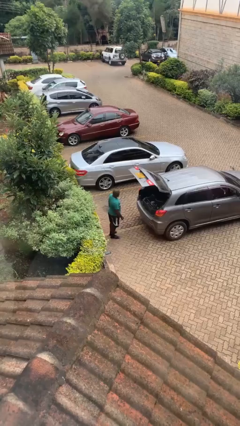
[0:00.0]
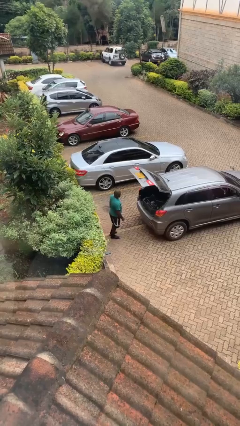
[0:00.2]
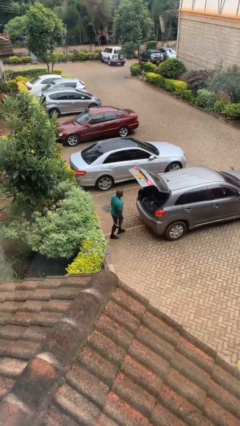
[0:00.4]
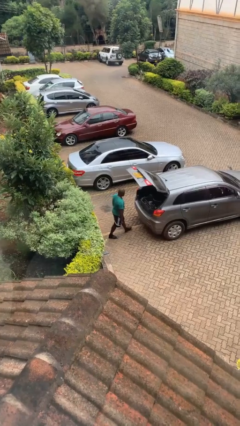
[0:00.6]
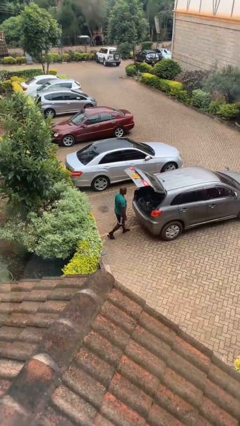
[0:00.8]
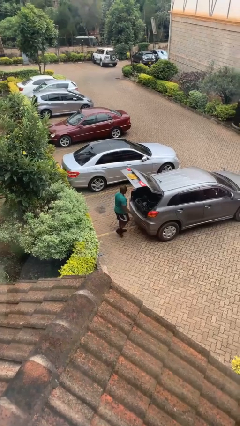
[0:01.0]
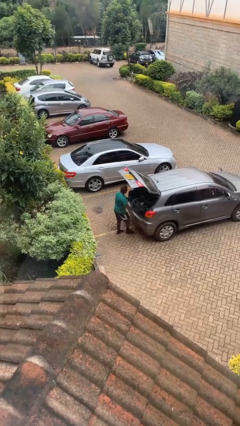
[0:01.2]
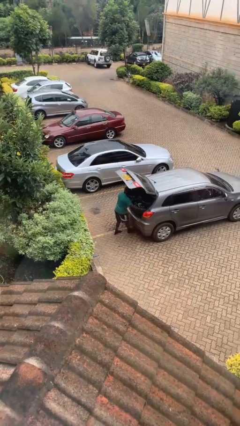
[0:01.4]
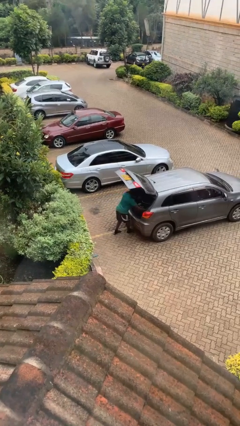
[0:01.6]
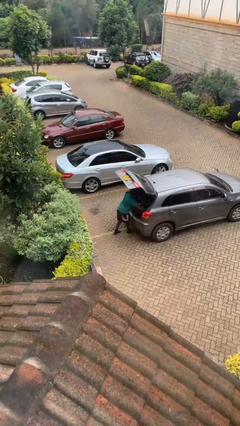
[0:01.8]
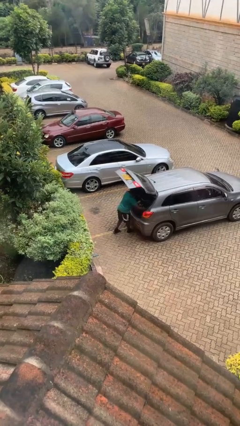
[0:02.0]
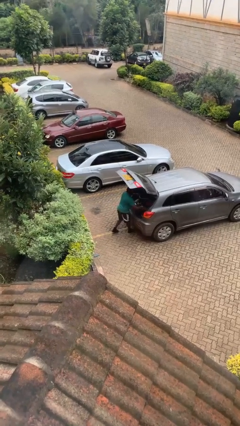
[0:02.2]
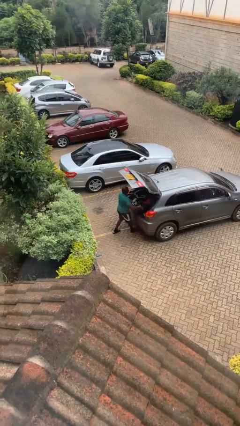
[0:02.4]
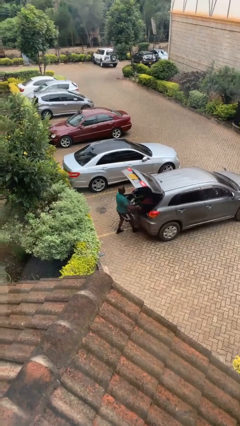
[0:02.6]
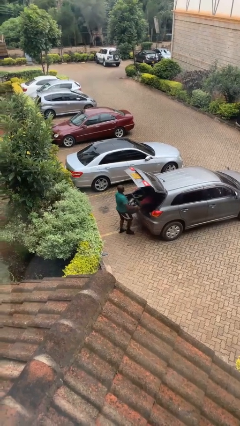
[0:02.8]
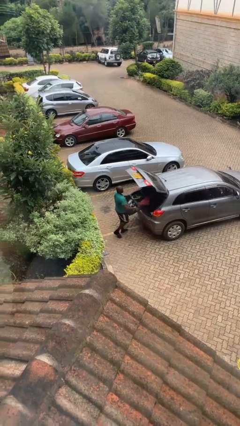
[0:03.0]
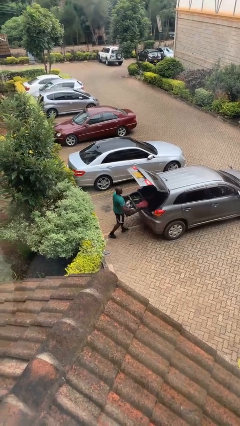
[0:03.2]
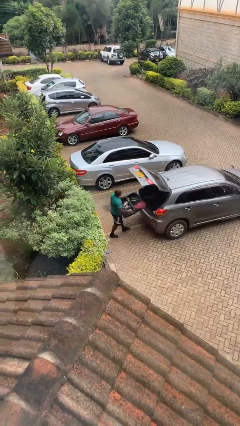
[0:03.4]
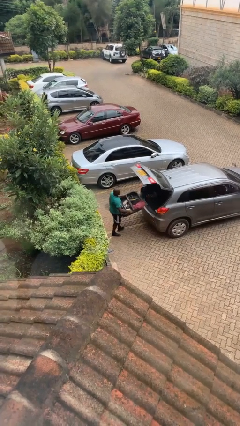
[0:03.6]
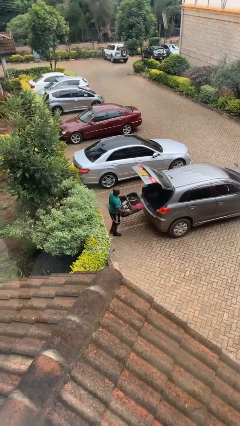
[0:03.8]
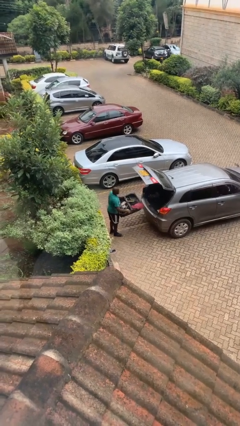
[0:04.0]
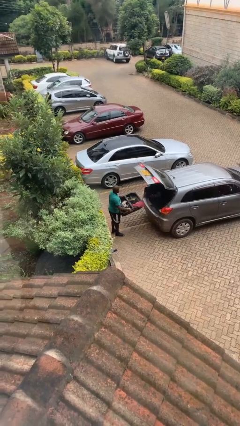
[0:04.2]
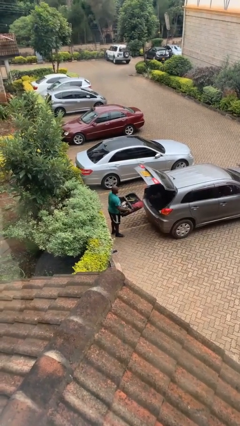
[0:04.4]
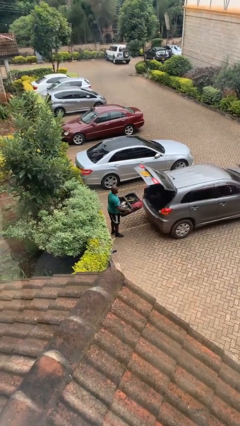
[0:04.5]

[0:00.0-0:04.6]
person unloads car

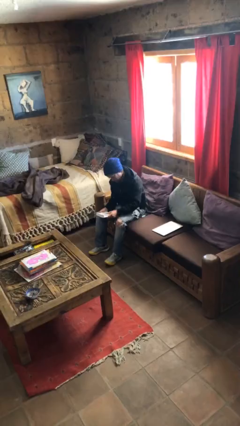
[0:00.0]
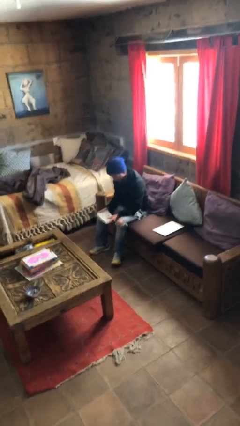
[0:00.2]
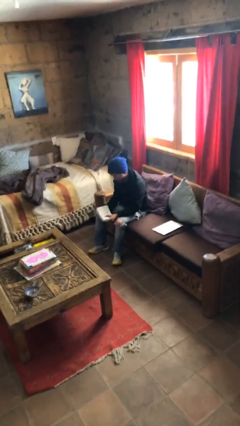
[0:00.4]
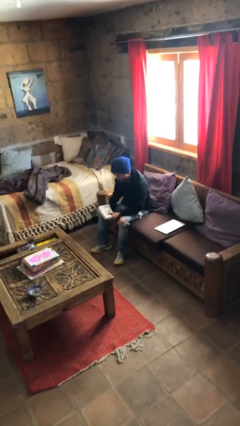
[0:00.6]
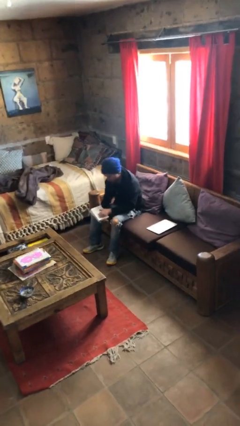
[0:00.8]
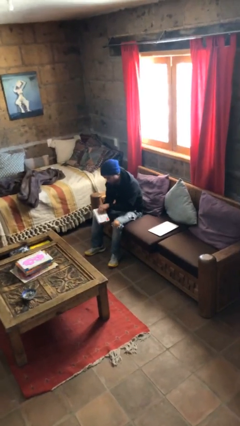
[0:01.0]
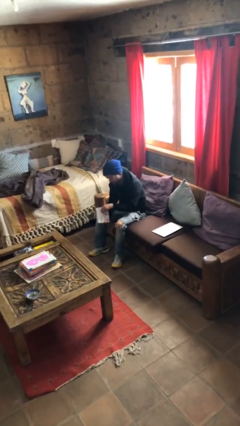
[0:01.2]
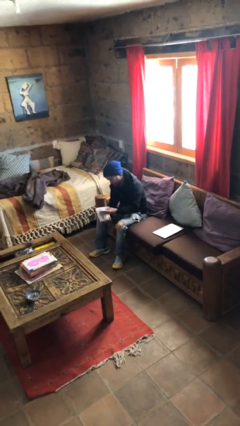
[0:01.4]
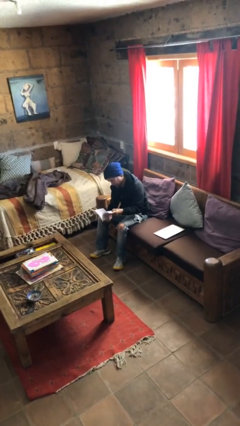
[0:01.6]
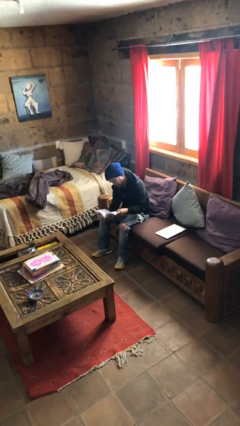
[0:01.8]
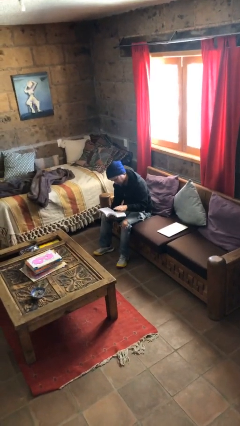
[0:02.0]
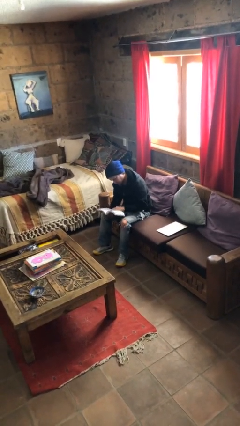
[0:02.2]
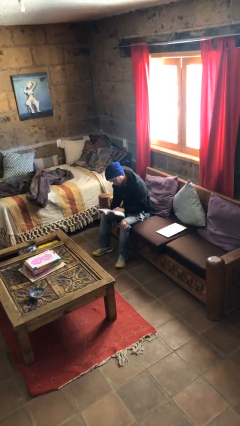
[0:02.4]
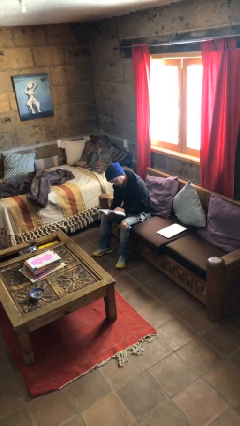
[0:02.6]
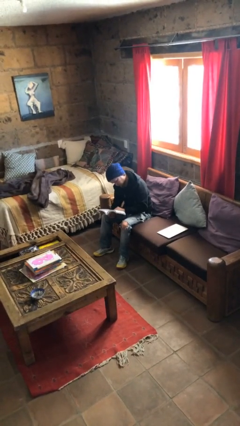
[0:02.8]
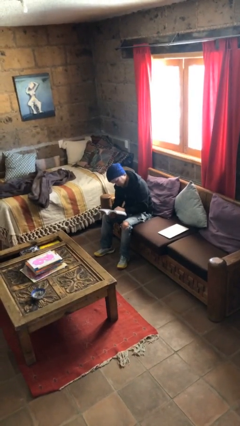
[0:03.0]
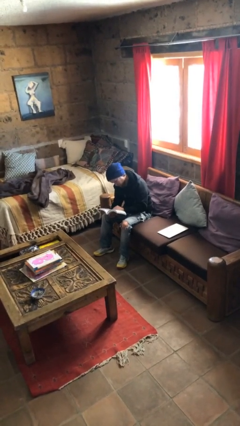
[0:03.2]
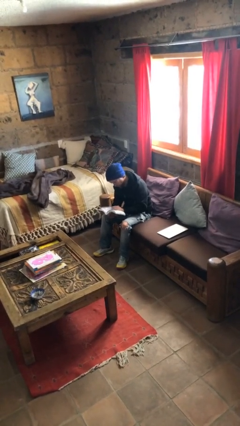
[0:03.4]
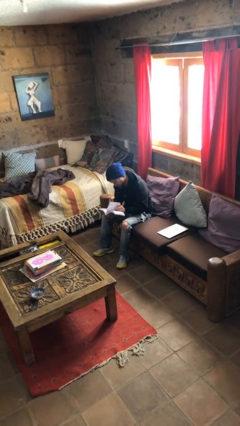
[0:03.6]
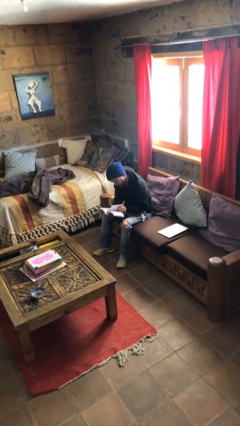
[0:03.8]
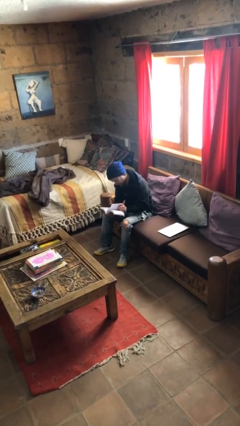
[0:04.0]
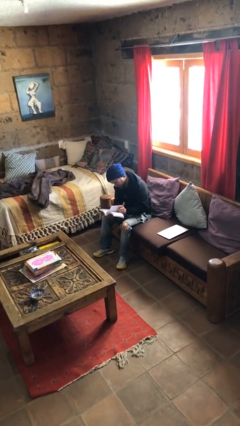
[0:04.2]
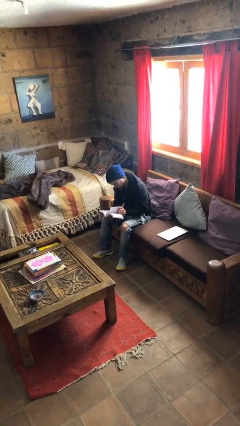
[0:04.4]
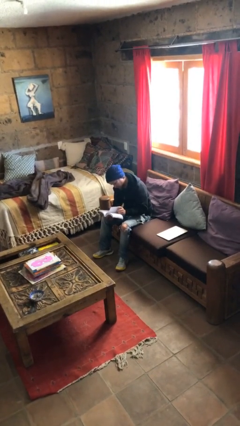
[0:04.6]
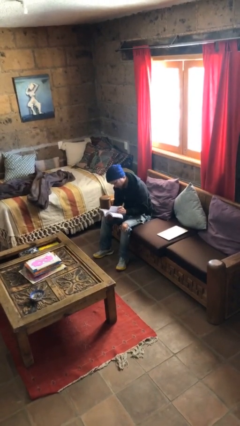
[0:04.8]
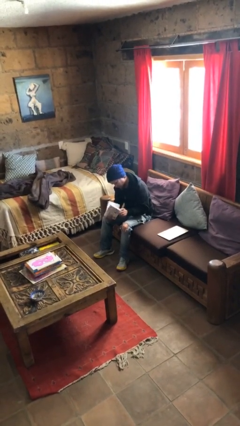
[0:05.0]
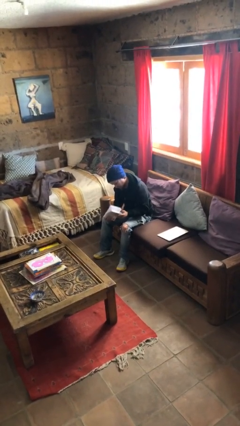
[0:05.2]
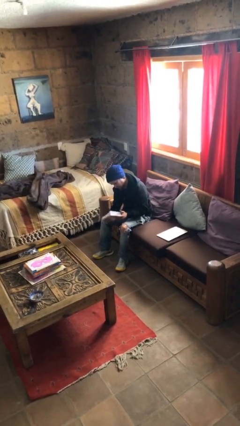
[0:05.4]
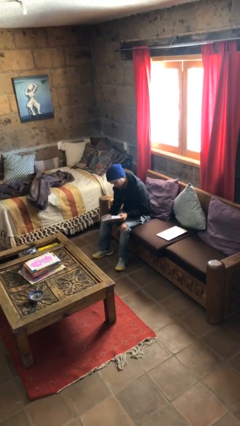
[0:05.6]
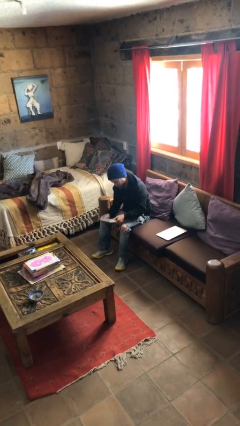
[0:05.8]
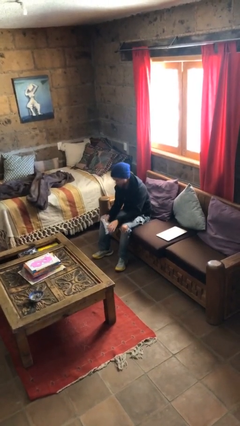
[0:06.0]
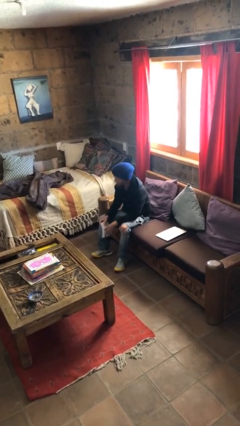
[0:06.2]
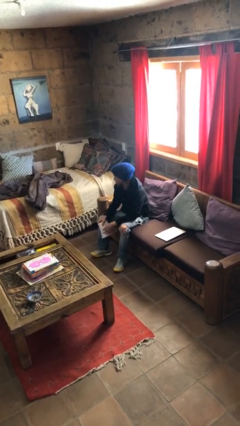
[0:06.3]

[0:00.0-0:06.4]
person reads document

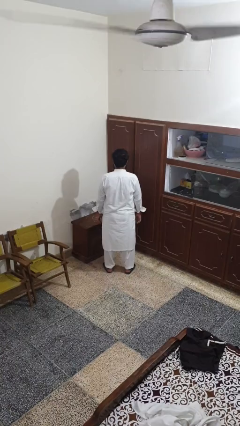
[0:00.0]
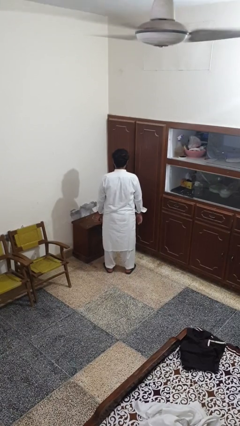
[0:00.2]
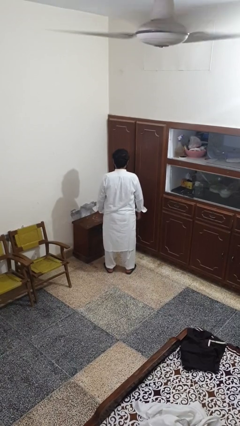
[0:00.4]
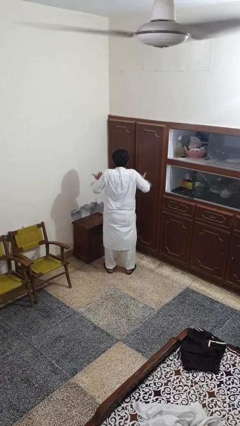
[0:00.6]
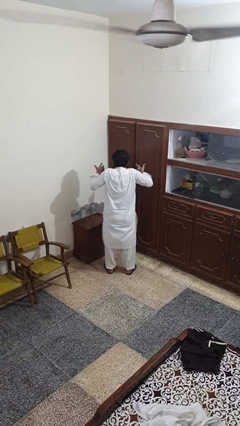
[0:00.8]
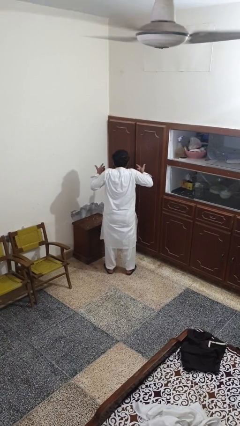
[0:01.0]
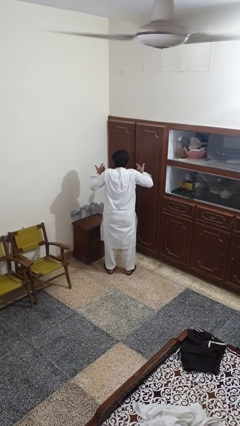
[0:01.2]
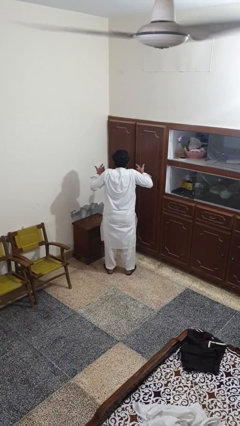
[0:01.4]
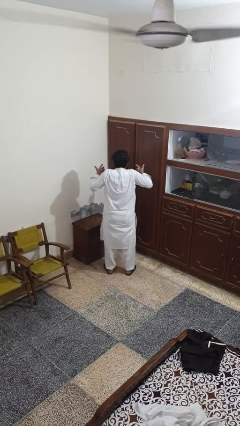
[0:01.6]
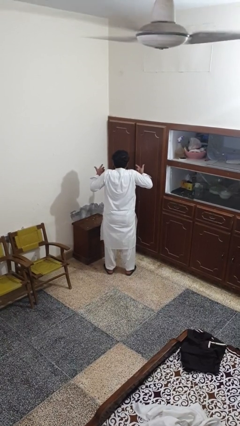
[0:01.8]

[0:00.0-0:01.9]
person shrugs

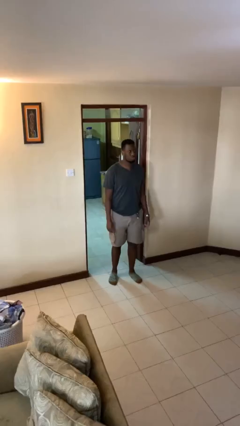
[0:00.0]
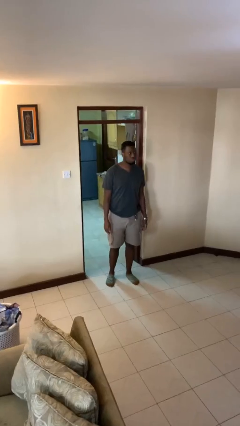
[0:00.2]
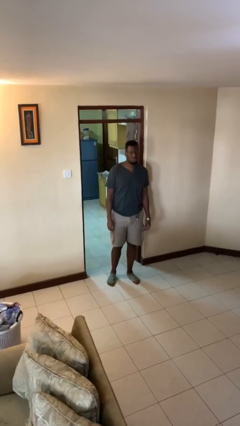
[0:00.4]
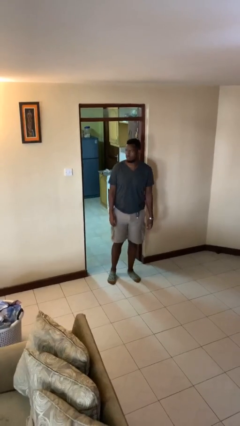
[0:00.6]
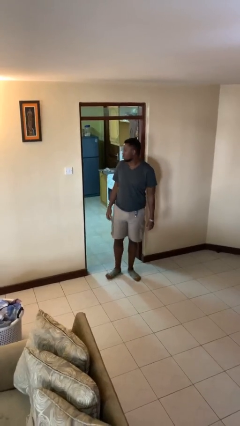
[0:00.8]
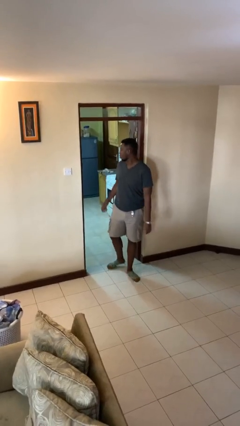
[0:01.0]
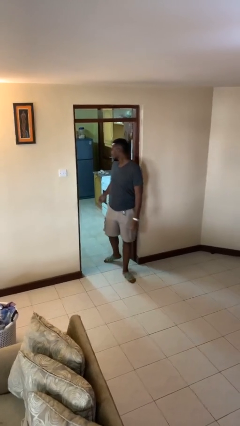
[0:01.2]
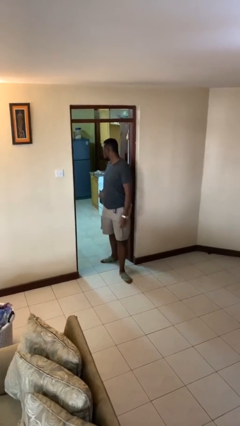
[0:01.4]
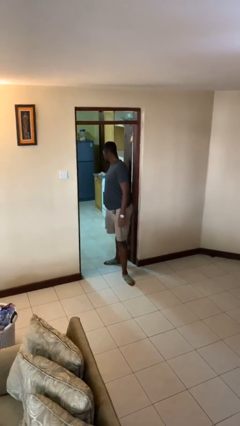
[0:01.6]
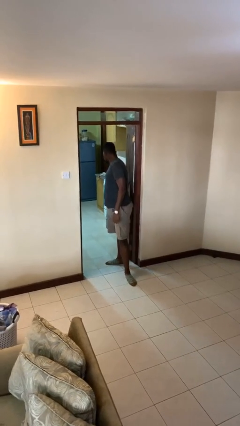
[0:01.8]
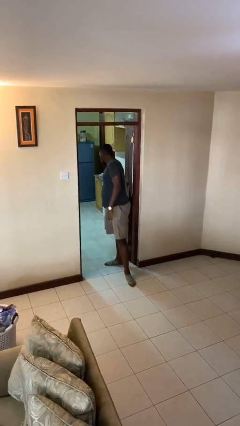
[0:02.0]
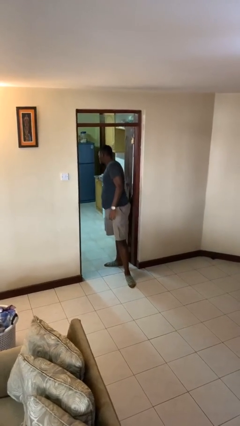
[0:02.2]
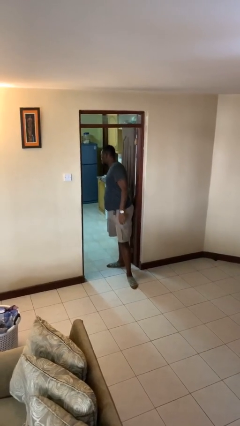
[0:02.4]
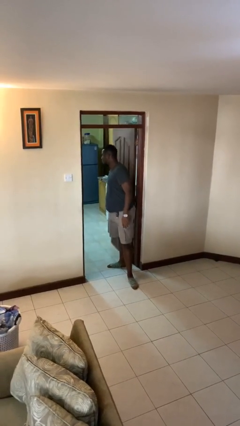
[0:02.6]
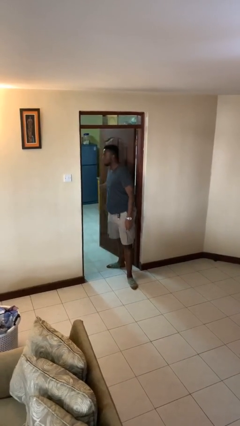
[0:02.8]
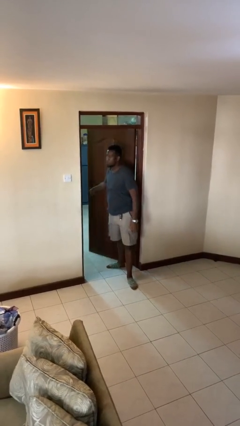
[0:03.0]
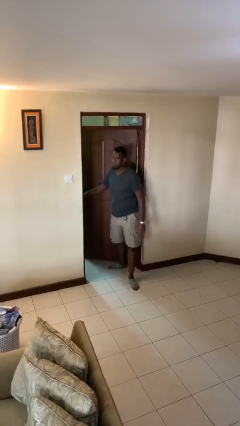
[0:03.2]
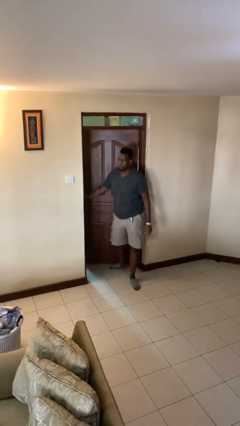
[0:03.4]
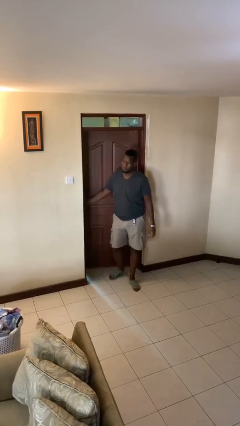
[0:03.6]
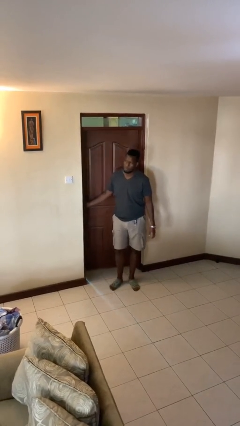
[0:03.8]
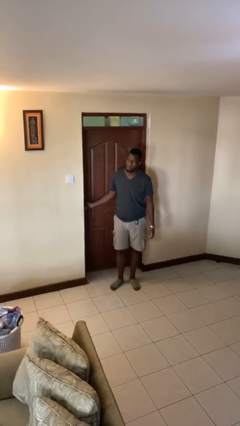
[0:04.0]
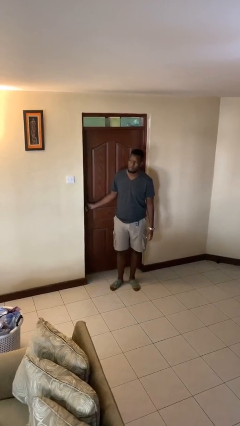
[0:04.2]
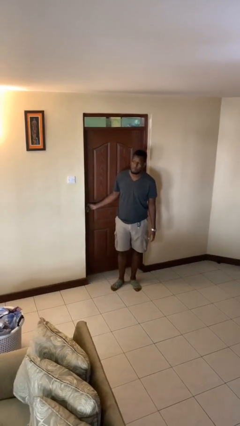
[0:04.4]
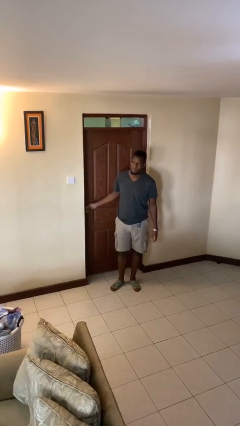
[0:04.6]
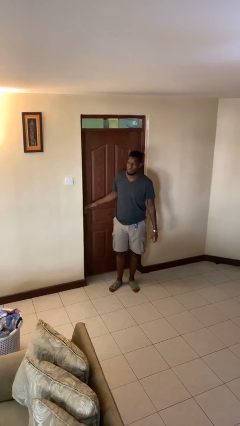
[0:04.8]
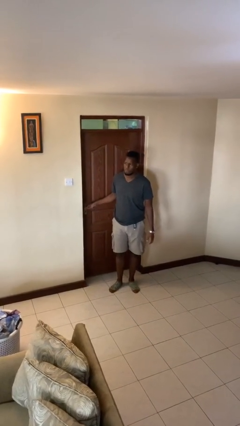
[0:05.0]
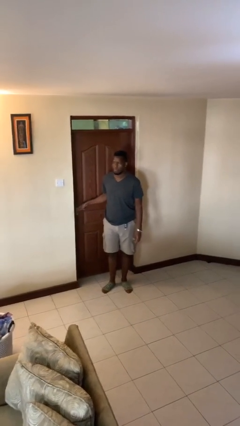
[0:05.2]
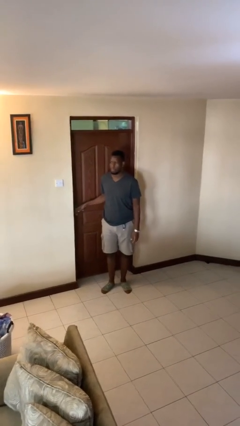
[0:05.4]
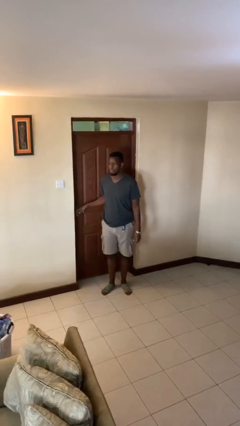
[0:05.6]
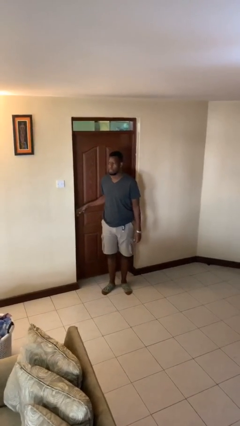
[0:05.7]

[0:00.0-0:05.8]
person closes facility door
